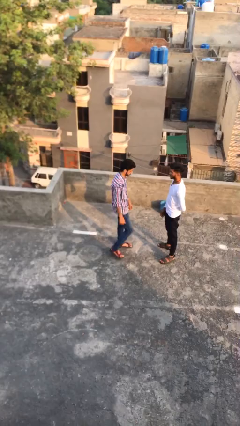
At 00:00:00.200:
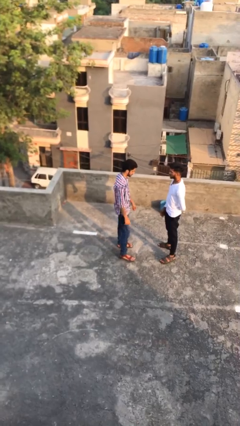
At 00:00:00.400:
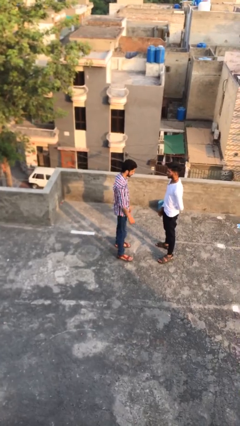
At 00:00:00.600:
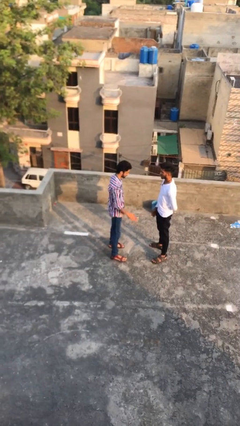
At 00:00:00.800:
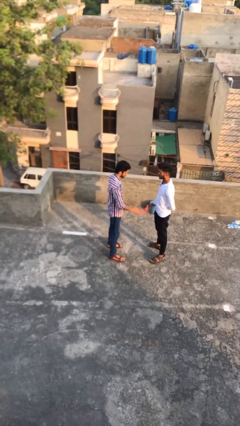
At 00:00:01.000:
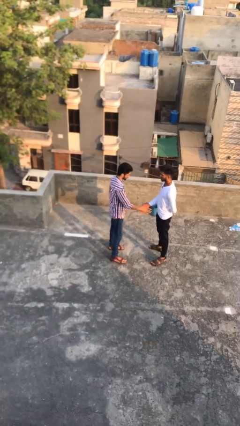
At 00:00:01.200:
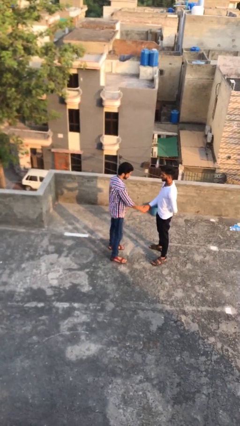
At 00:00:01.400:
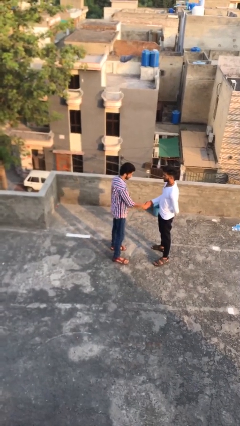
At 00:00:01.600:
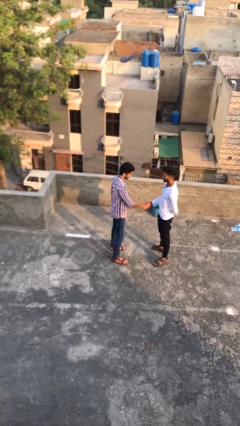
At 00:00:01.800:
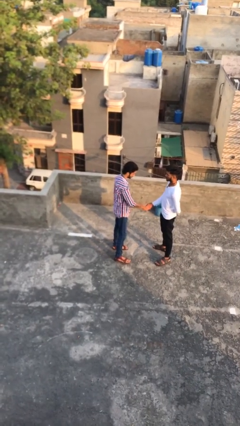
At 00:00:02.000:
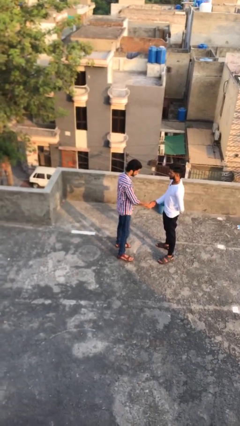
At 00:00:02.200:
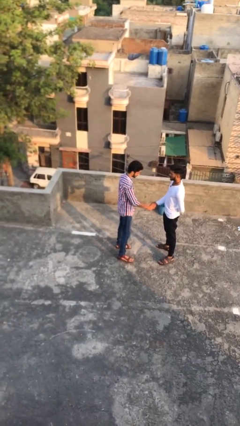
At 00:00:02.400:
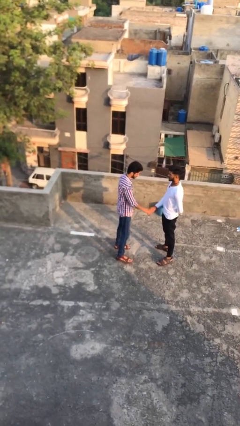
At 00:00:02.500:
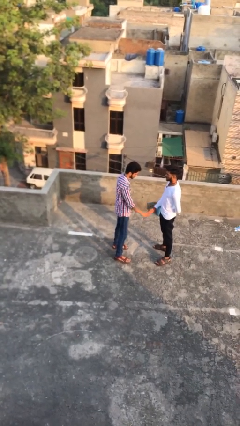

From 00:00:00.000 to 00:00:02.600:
person shakes hand

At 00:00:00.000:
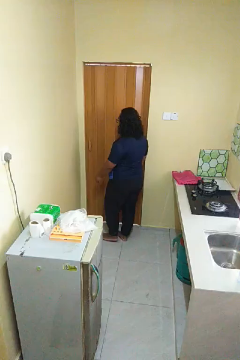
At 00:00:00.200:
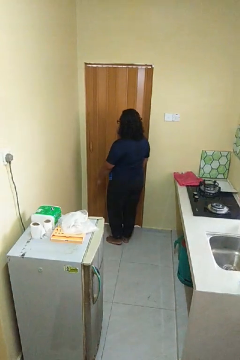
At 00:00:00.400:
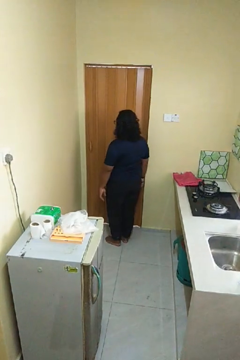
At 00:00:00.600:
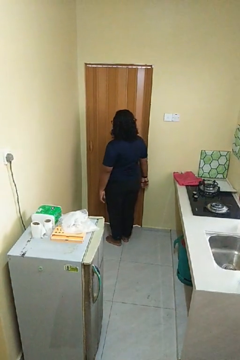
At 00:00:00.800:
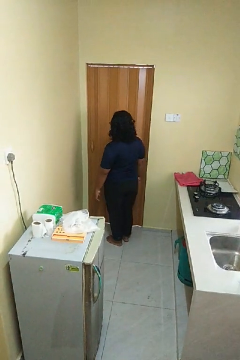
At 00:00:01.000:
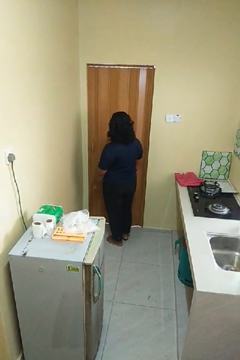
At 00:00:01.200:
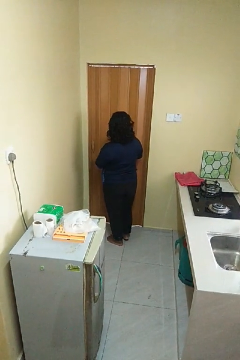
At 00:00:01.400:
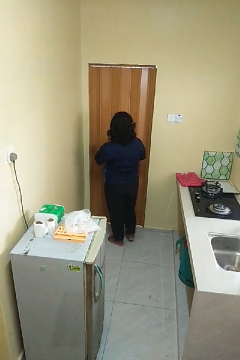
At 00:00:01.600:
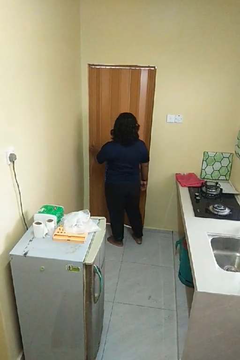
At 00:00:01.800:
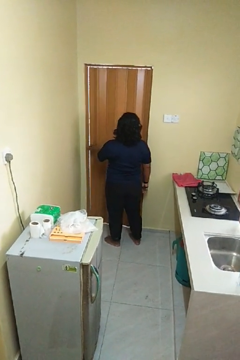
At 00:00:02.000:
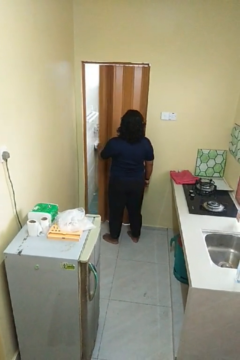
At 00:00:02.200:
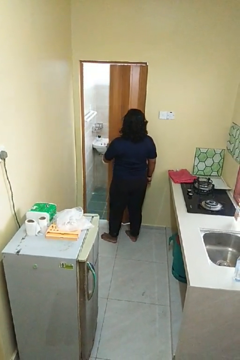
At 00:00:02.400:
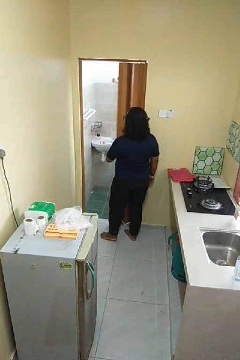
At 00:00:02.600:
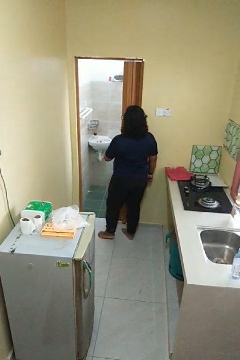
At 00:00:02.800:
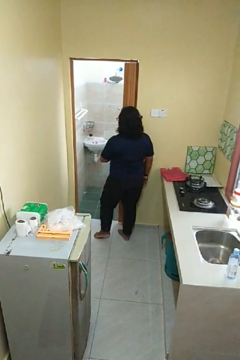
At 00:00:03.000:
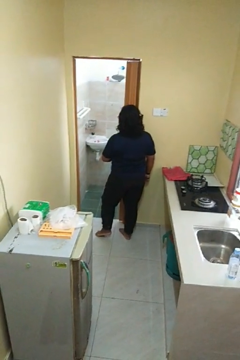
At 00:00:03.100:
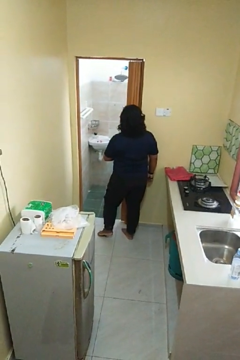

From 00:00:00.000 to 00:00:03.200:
person opens sliding door

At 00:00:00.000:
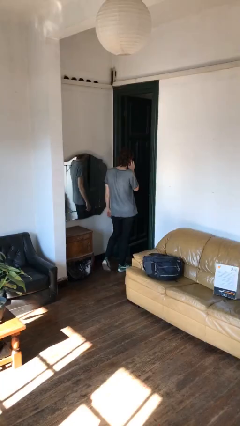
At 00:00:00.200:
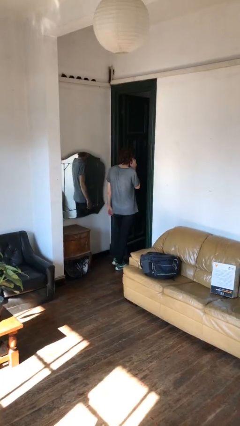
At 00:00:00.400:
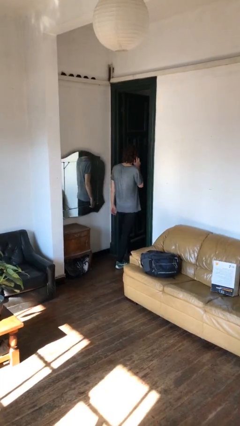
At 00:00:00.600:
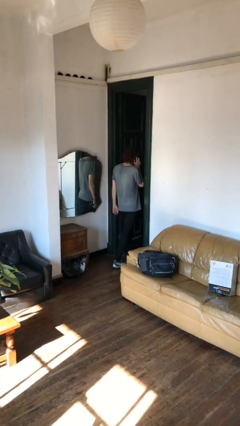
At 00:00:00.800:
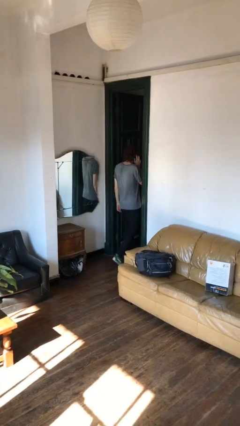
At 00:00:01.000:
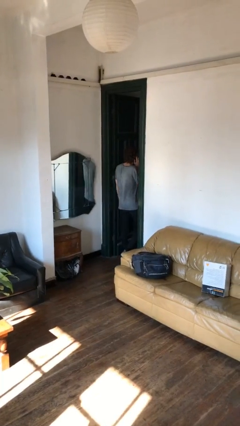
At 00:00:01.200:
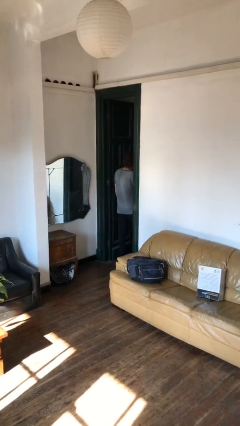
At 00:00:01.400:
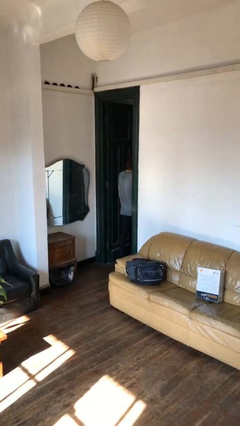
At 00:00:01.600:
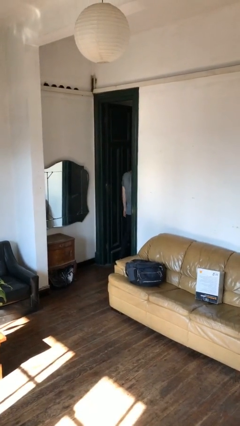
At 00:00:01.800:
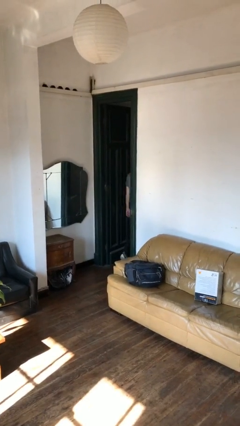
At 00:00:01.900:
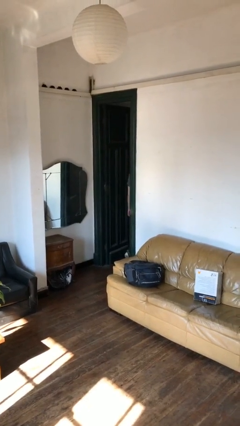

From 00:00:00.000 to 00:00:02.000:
person exits scene through structure

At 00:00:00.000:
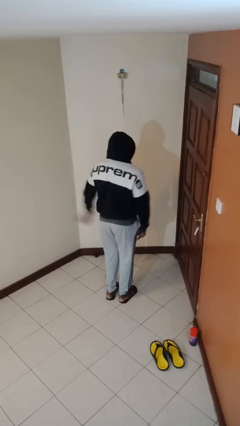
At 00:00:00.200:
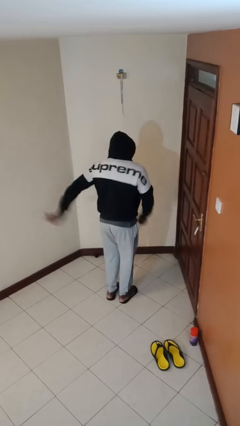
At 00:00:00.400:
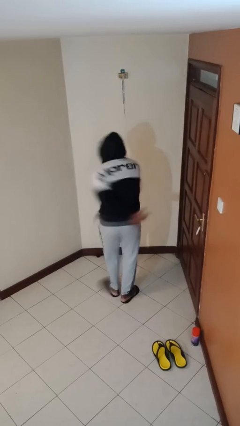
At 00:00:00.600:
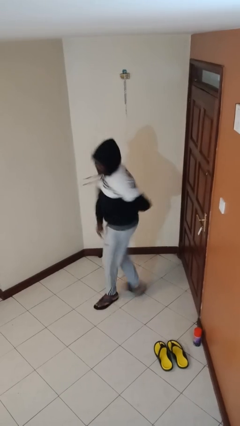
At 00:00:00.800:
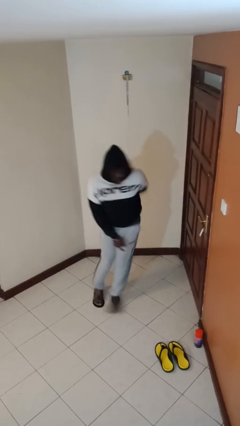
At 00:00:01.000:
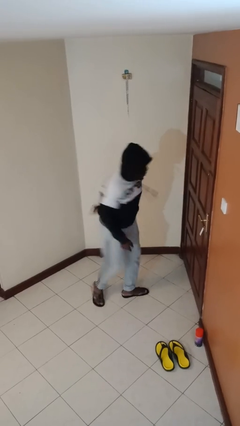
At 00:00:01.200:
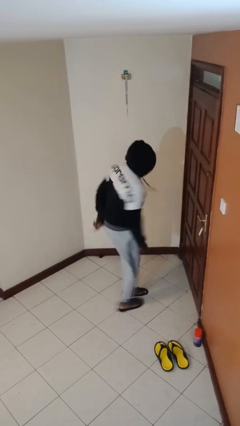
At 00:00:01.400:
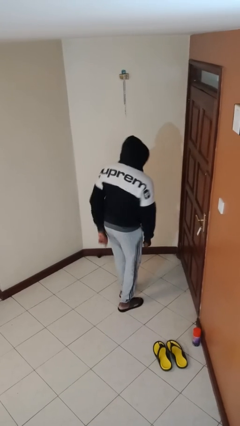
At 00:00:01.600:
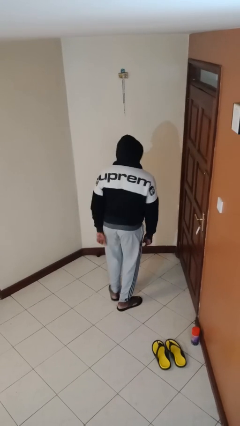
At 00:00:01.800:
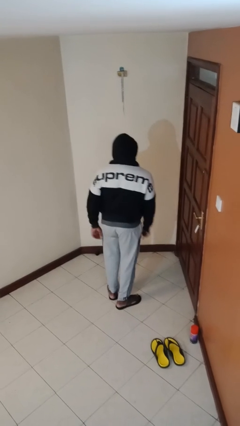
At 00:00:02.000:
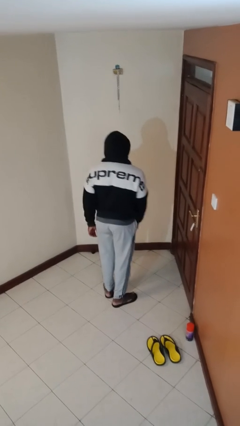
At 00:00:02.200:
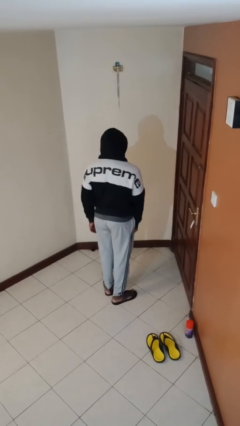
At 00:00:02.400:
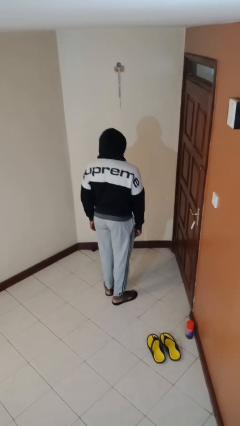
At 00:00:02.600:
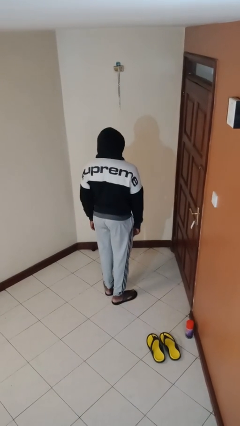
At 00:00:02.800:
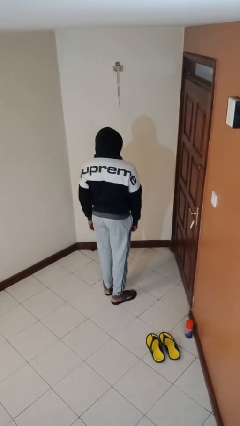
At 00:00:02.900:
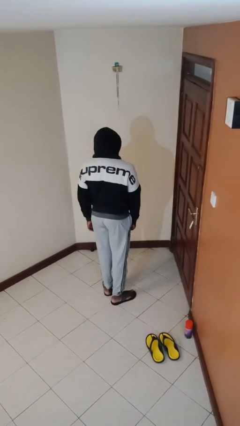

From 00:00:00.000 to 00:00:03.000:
person twirls

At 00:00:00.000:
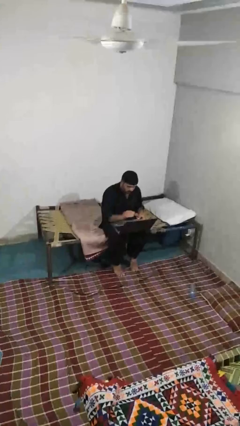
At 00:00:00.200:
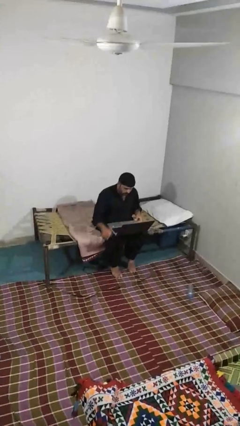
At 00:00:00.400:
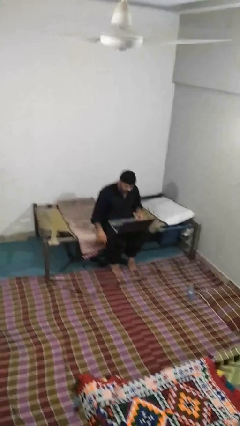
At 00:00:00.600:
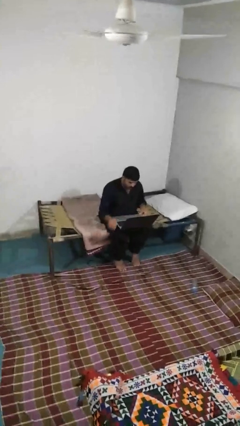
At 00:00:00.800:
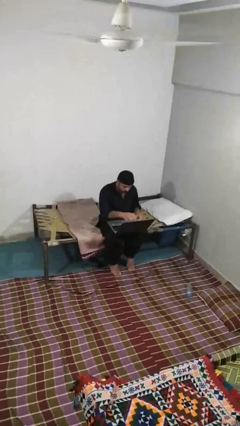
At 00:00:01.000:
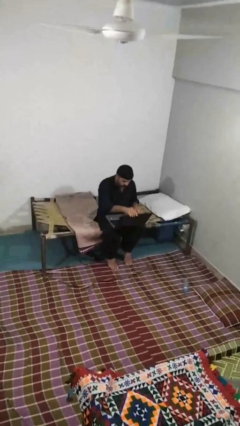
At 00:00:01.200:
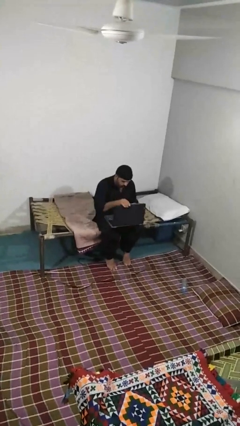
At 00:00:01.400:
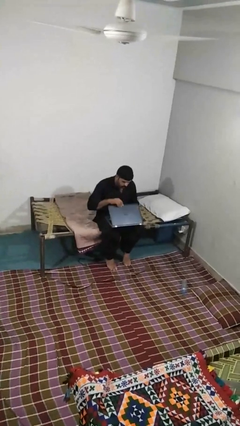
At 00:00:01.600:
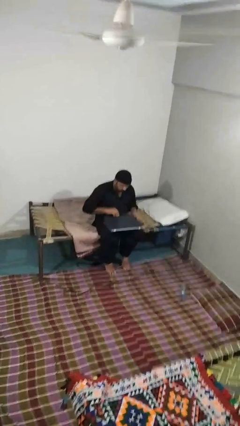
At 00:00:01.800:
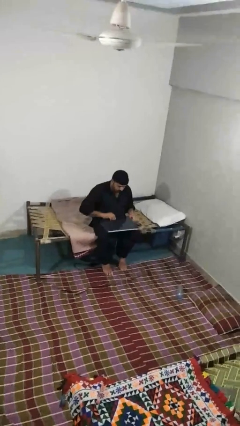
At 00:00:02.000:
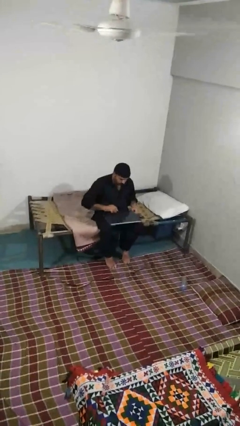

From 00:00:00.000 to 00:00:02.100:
person closes laptop

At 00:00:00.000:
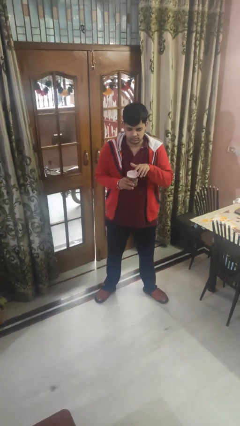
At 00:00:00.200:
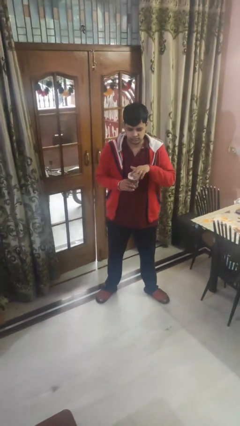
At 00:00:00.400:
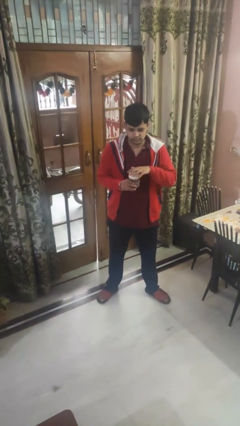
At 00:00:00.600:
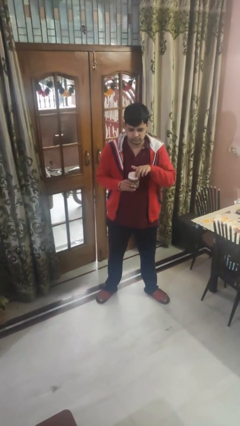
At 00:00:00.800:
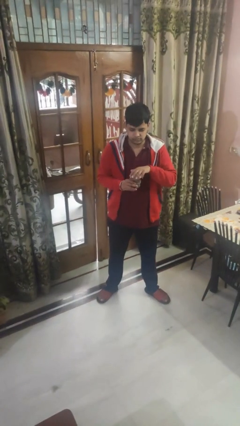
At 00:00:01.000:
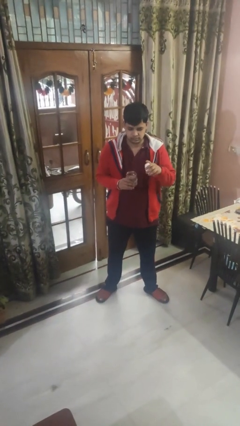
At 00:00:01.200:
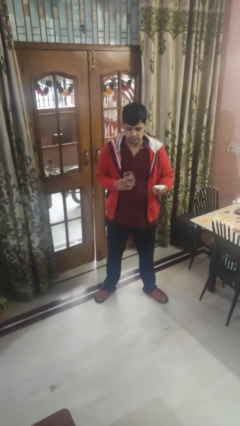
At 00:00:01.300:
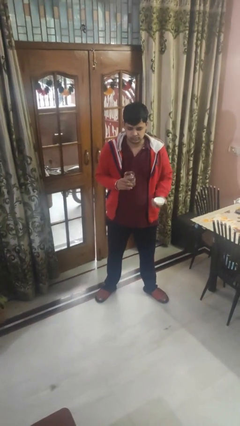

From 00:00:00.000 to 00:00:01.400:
person opens jar

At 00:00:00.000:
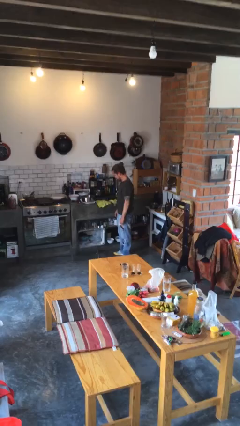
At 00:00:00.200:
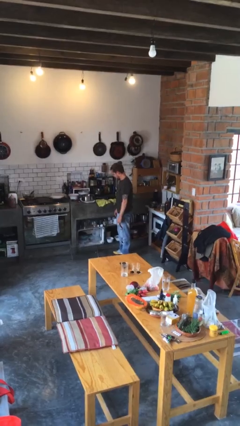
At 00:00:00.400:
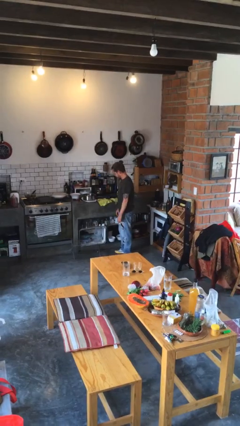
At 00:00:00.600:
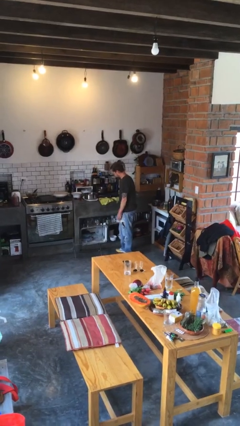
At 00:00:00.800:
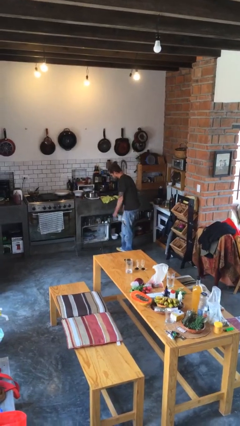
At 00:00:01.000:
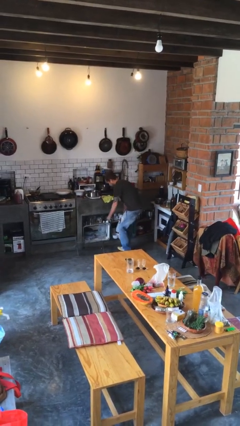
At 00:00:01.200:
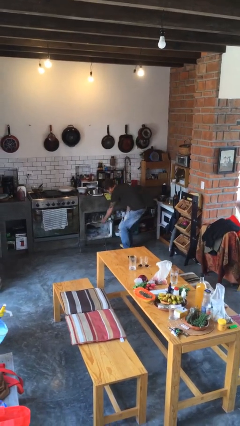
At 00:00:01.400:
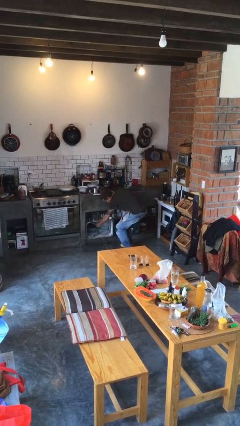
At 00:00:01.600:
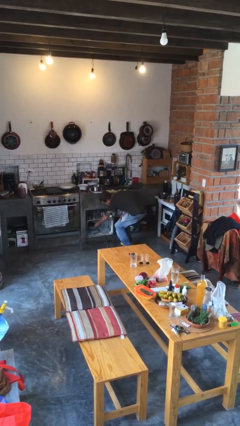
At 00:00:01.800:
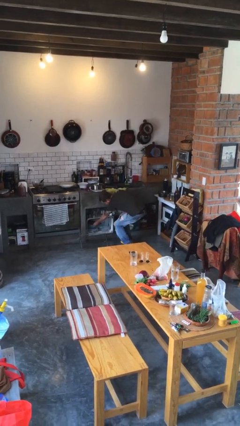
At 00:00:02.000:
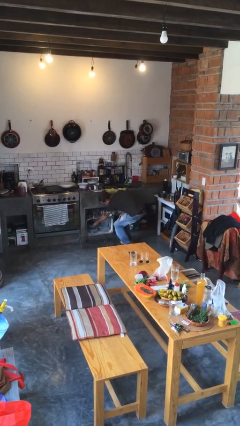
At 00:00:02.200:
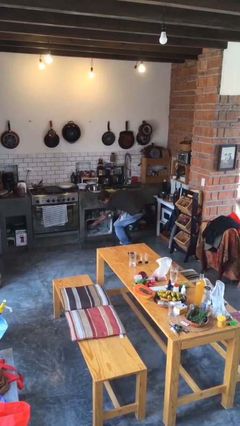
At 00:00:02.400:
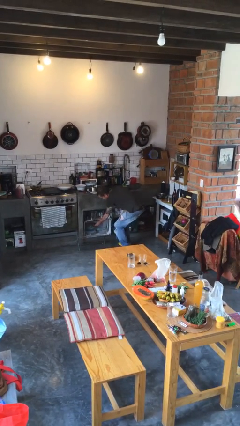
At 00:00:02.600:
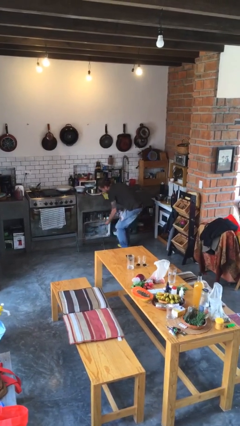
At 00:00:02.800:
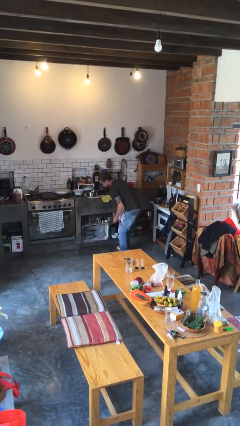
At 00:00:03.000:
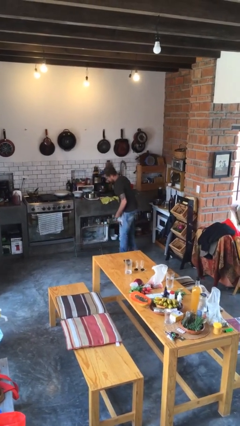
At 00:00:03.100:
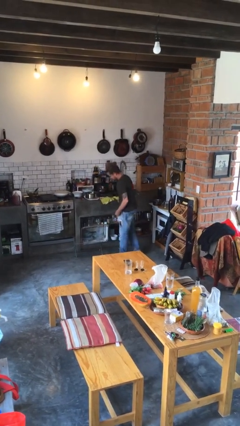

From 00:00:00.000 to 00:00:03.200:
person picks up object from cabinet
